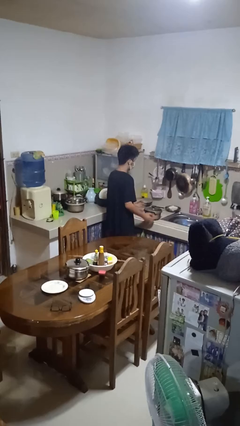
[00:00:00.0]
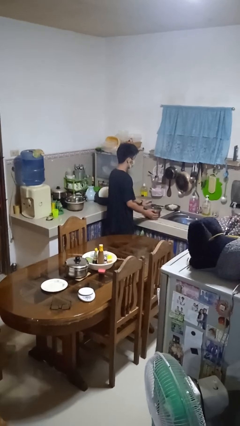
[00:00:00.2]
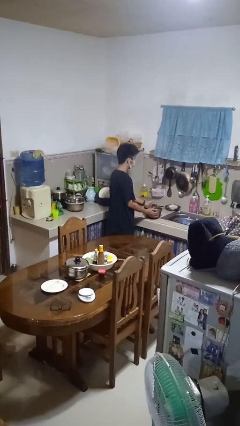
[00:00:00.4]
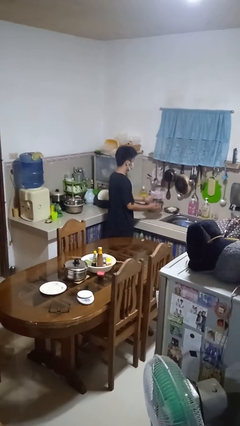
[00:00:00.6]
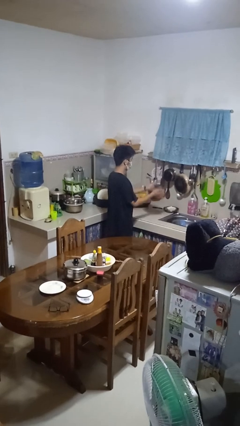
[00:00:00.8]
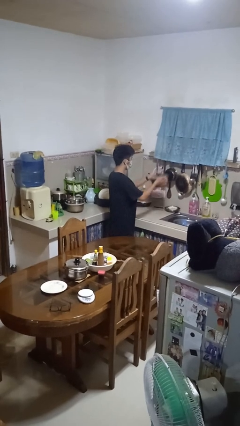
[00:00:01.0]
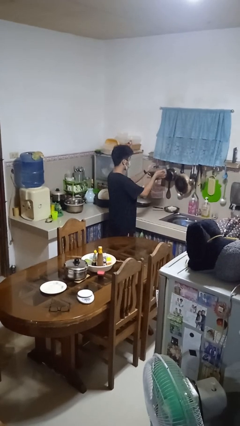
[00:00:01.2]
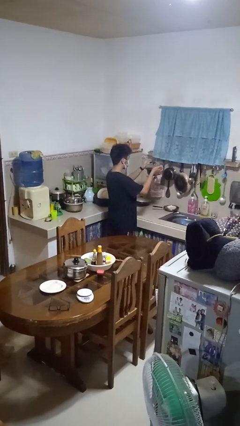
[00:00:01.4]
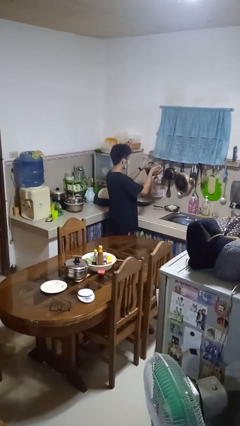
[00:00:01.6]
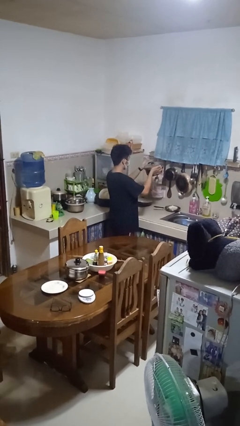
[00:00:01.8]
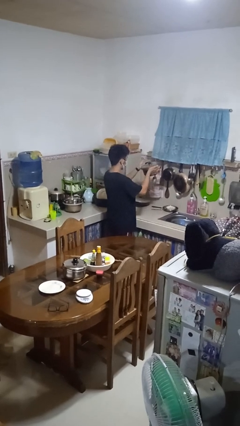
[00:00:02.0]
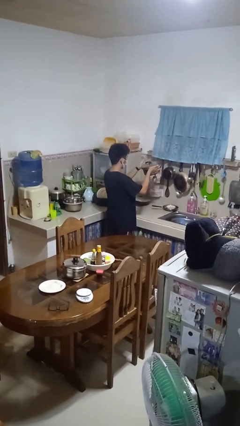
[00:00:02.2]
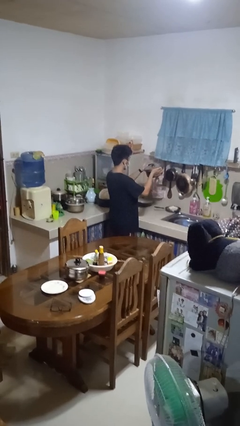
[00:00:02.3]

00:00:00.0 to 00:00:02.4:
person picks up object from countertop

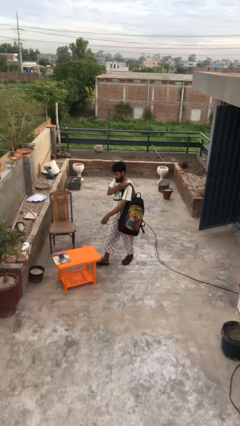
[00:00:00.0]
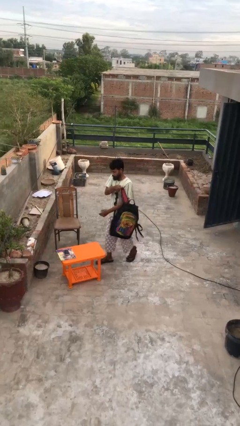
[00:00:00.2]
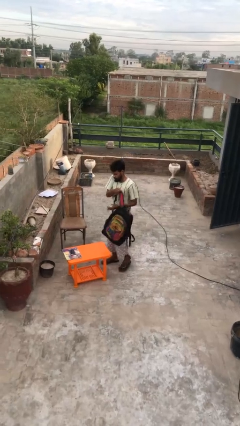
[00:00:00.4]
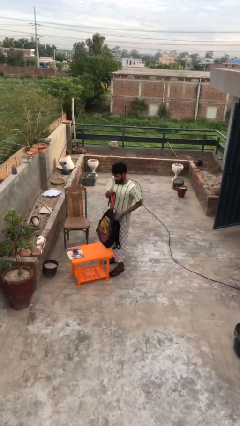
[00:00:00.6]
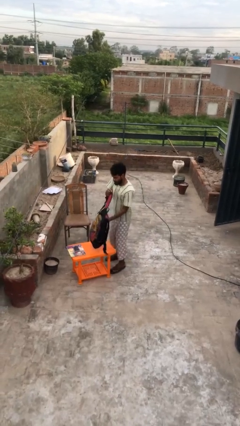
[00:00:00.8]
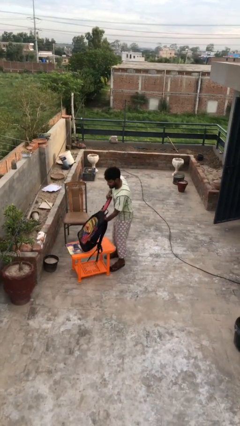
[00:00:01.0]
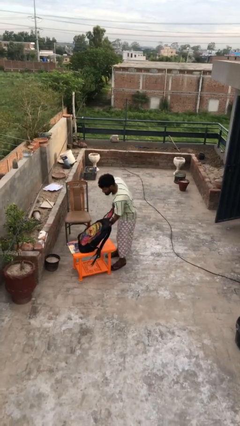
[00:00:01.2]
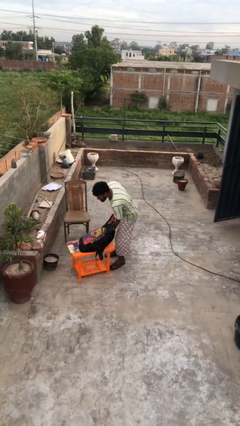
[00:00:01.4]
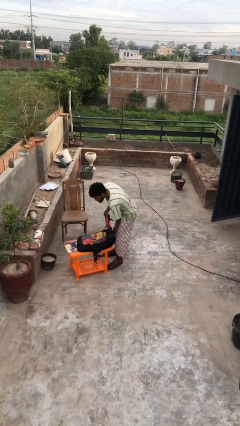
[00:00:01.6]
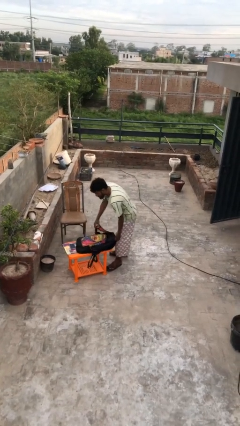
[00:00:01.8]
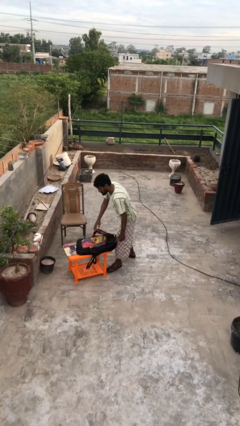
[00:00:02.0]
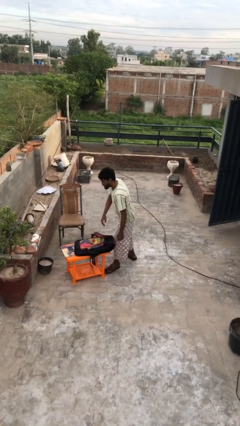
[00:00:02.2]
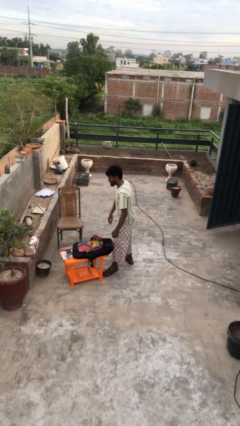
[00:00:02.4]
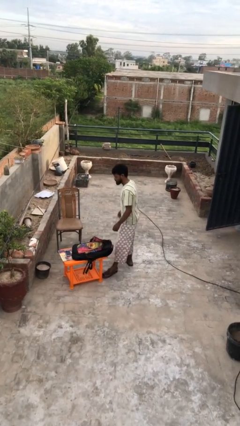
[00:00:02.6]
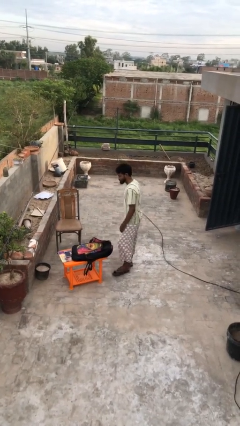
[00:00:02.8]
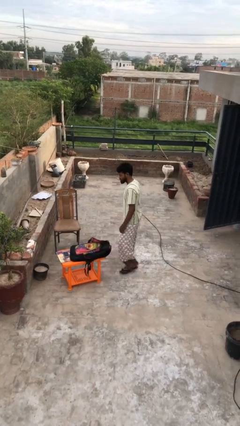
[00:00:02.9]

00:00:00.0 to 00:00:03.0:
person puts down object on table

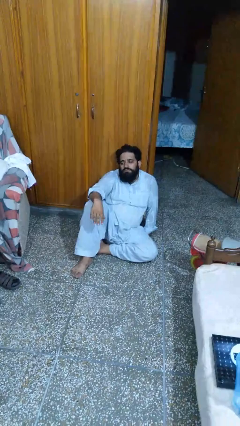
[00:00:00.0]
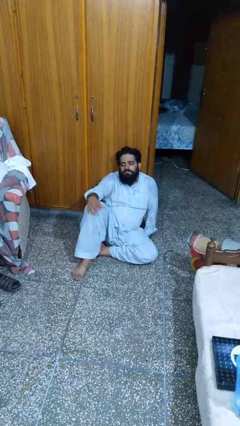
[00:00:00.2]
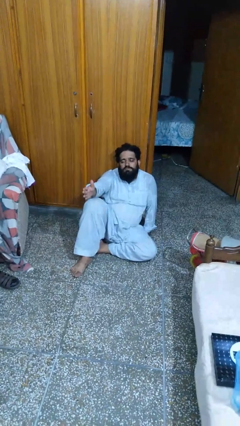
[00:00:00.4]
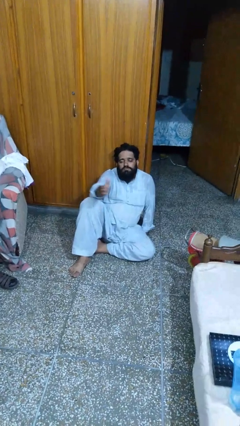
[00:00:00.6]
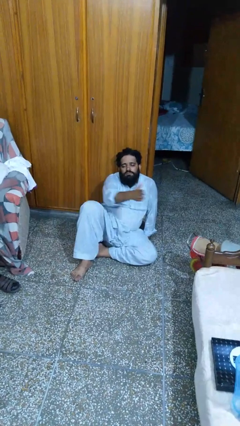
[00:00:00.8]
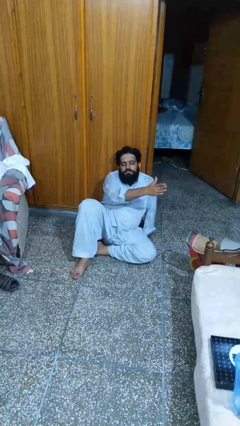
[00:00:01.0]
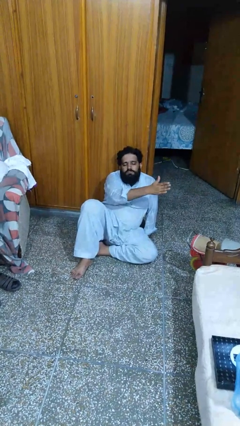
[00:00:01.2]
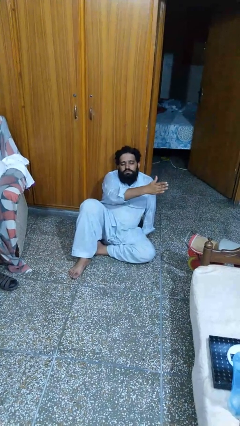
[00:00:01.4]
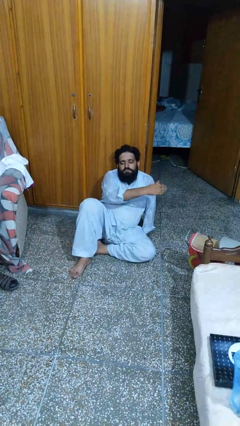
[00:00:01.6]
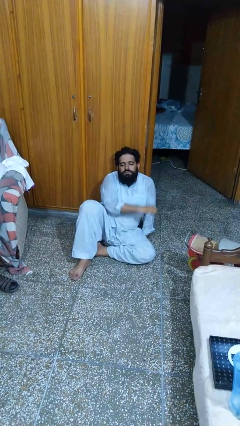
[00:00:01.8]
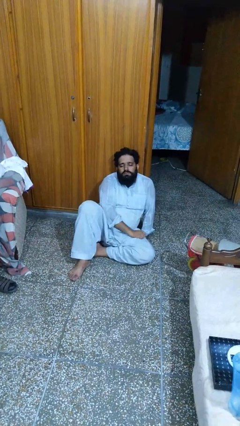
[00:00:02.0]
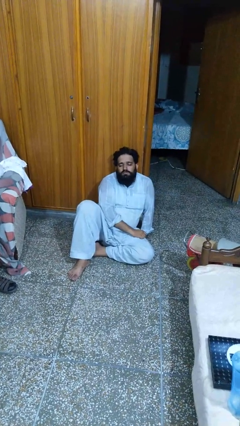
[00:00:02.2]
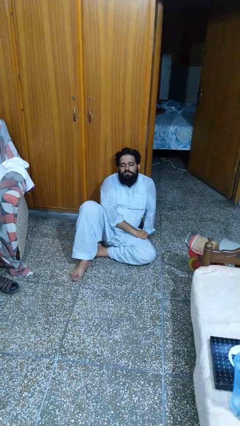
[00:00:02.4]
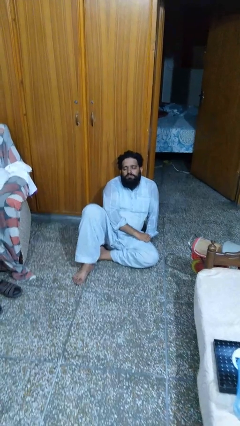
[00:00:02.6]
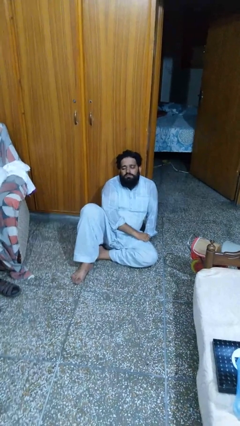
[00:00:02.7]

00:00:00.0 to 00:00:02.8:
person gestures swipe left

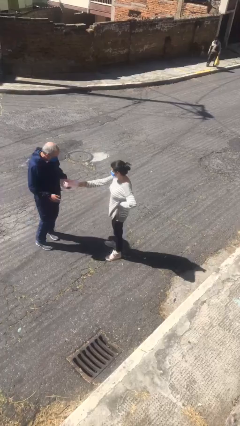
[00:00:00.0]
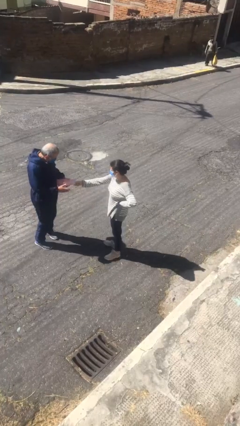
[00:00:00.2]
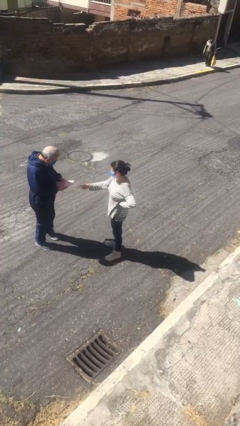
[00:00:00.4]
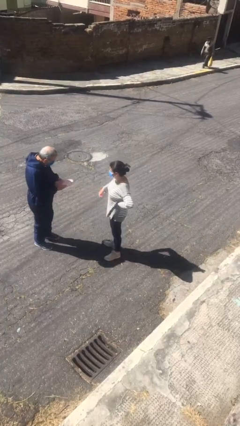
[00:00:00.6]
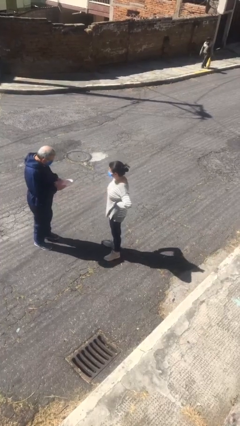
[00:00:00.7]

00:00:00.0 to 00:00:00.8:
person transfers object to person

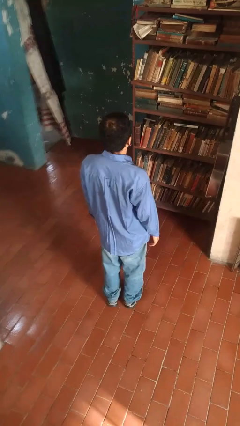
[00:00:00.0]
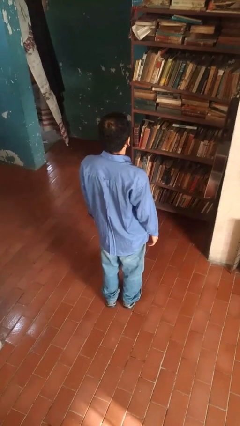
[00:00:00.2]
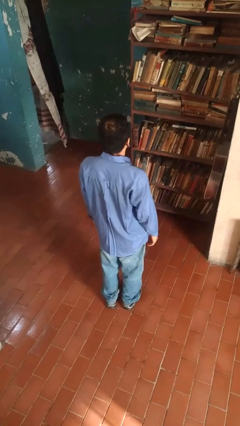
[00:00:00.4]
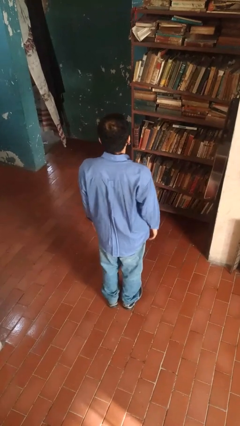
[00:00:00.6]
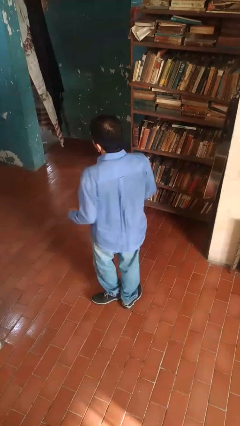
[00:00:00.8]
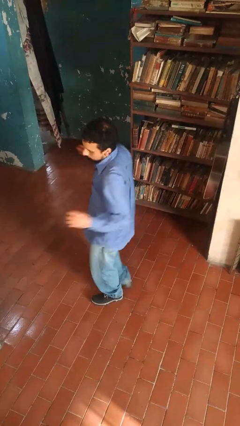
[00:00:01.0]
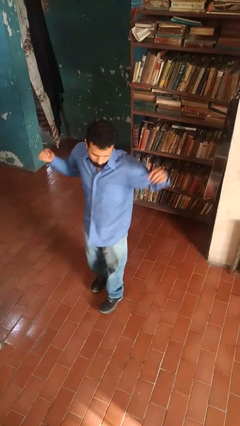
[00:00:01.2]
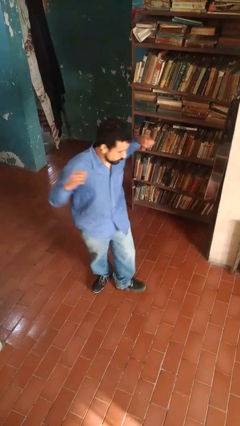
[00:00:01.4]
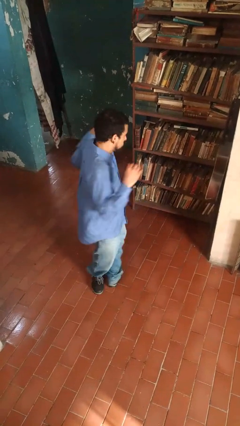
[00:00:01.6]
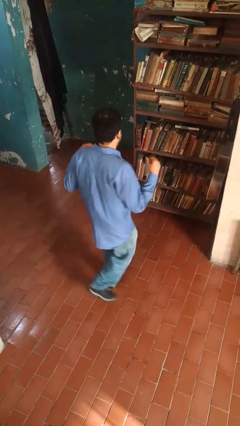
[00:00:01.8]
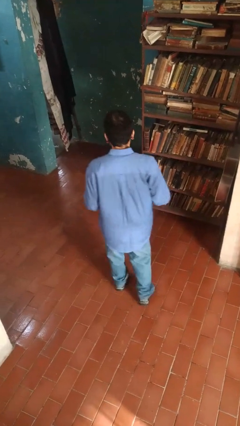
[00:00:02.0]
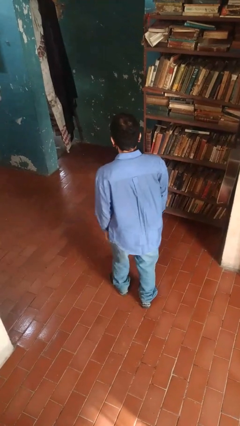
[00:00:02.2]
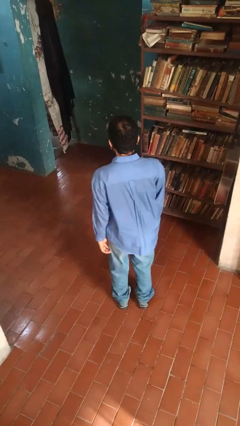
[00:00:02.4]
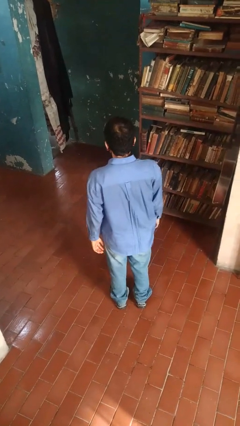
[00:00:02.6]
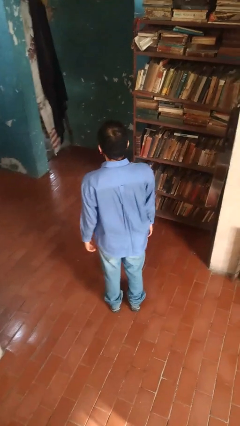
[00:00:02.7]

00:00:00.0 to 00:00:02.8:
person twirls

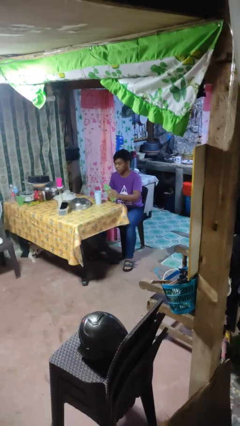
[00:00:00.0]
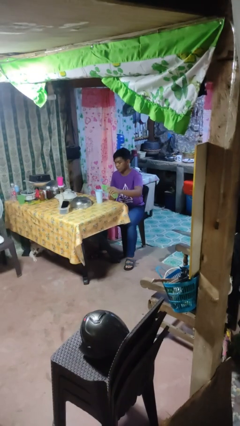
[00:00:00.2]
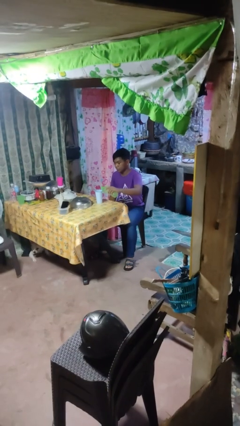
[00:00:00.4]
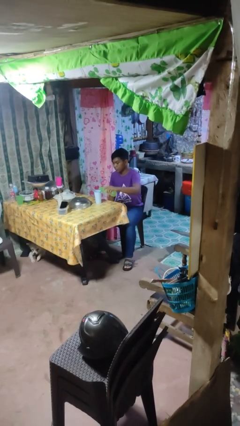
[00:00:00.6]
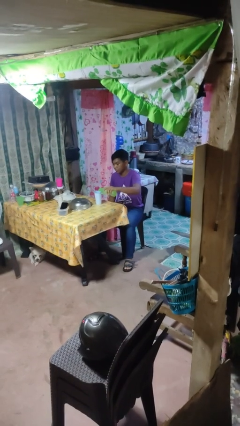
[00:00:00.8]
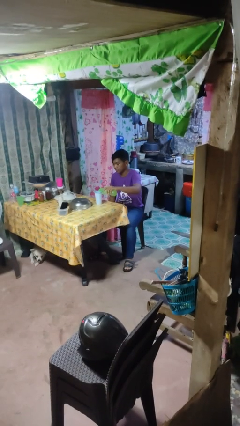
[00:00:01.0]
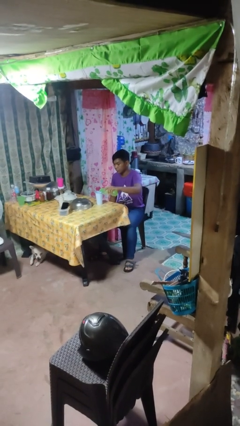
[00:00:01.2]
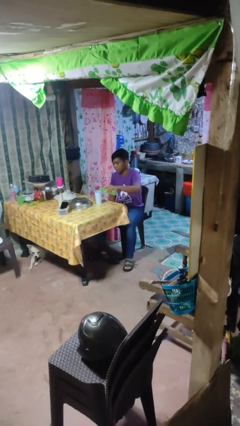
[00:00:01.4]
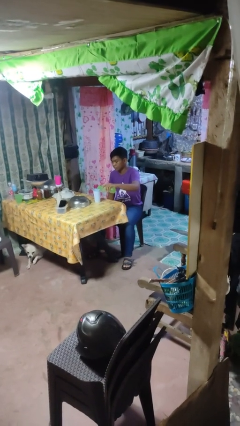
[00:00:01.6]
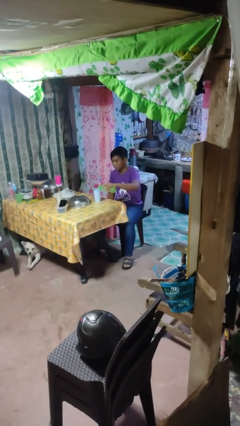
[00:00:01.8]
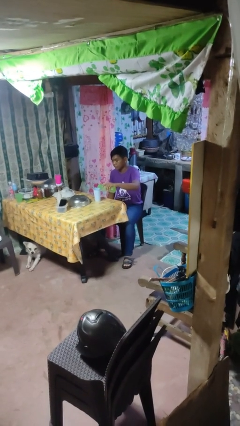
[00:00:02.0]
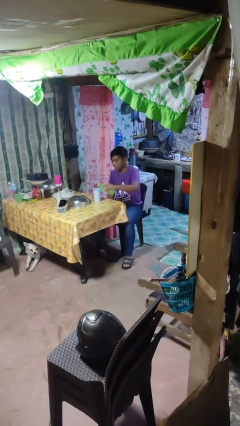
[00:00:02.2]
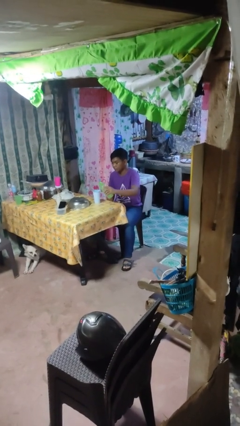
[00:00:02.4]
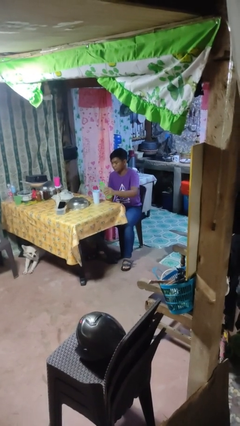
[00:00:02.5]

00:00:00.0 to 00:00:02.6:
person pours liquid into cup

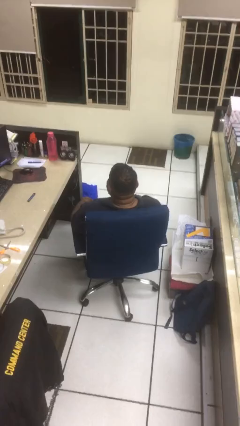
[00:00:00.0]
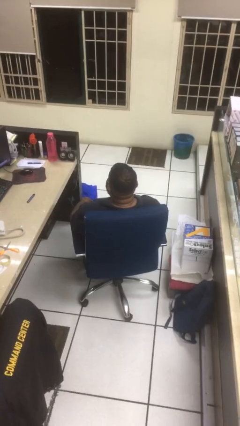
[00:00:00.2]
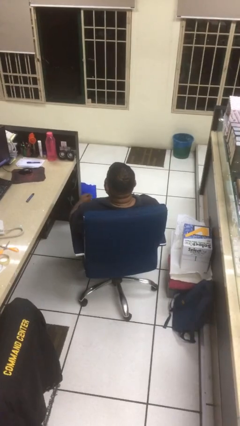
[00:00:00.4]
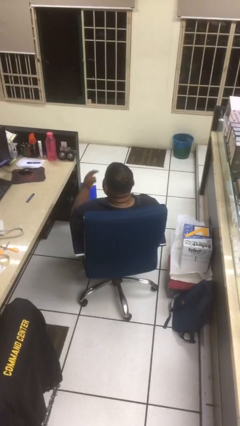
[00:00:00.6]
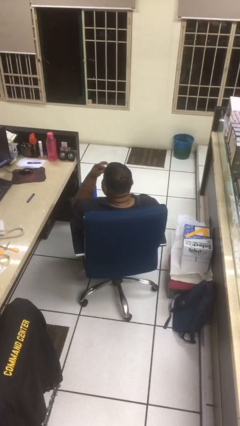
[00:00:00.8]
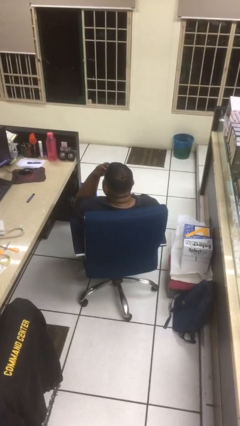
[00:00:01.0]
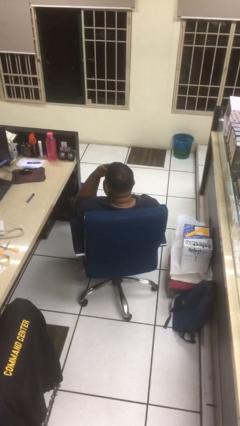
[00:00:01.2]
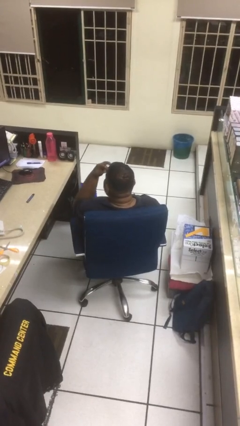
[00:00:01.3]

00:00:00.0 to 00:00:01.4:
person gestures watch closely

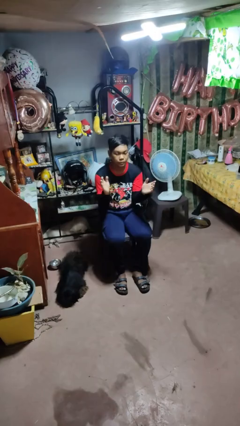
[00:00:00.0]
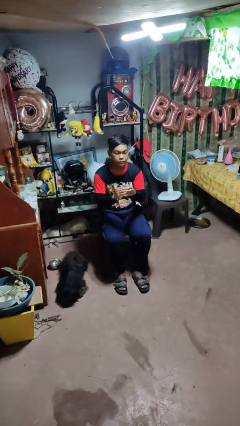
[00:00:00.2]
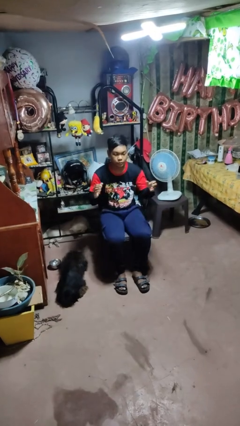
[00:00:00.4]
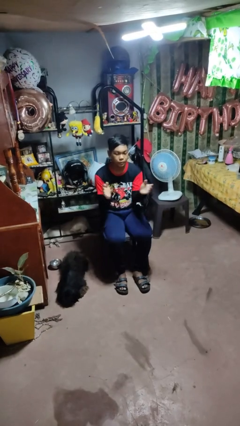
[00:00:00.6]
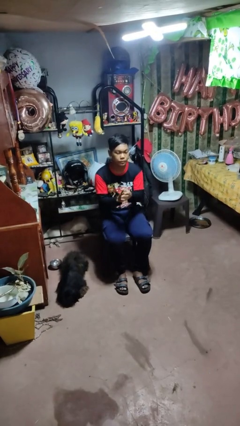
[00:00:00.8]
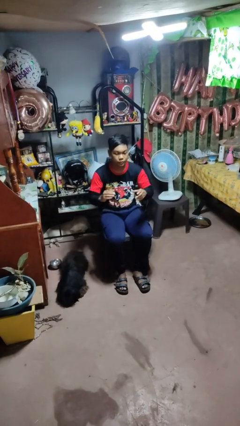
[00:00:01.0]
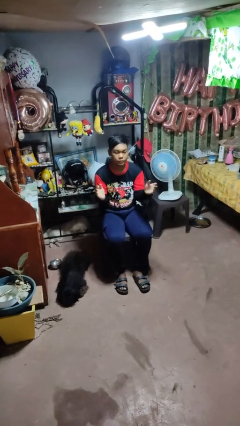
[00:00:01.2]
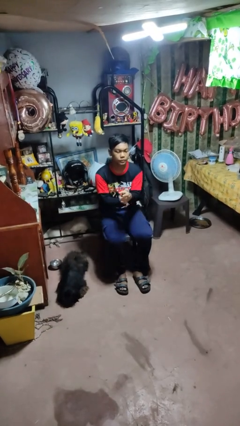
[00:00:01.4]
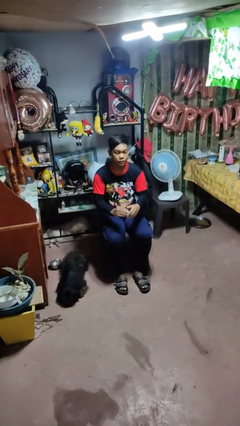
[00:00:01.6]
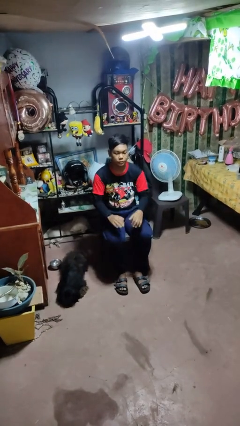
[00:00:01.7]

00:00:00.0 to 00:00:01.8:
person claps hands
